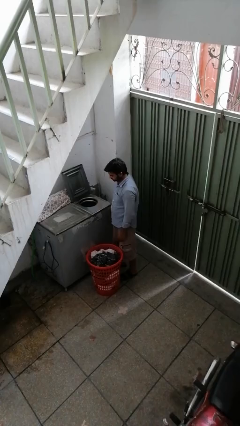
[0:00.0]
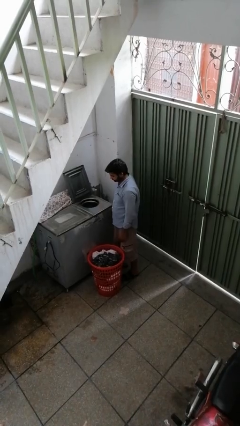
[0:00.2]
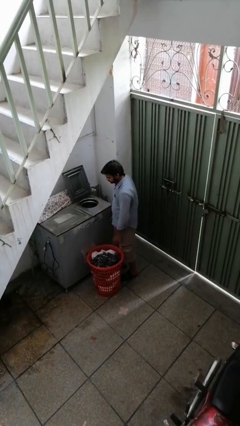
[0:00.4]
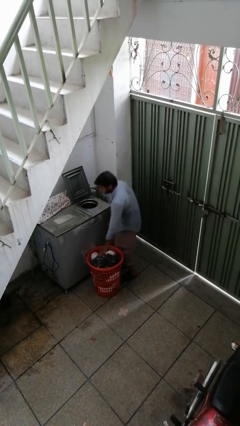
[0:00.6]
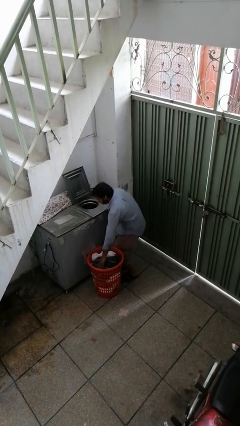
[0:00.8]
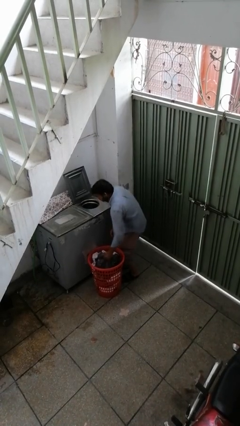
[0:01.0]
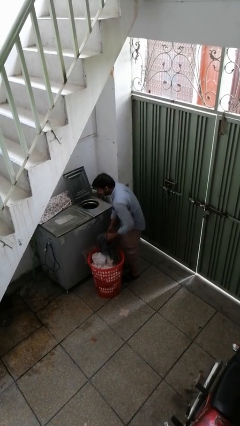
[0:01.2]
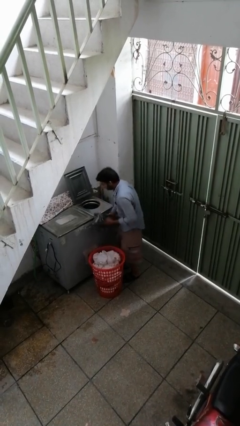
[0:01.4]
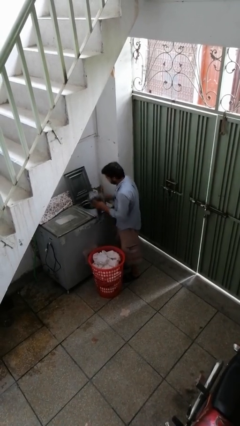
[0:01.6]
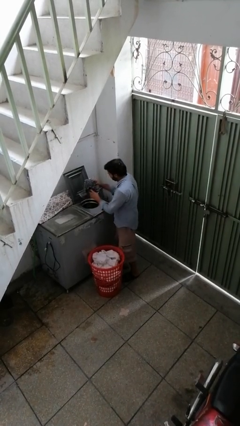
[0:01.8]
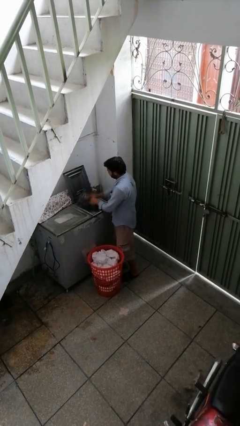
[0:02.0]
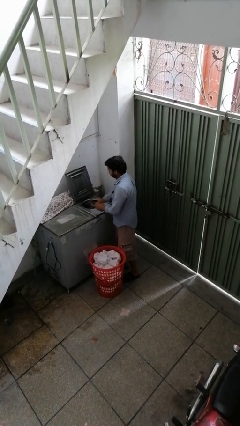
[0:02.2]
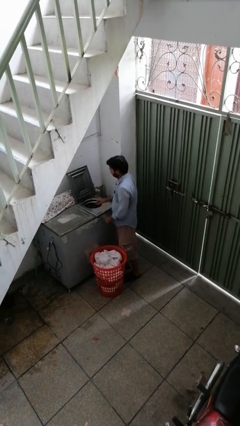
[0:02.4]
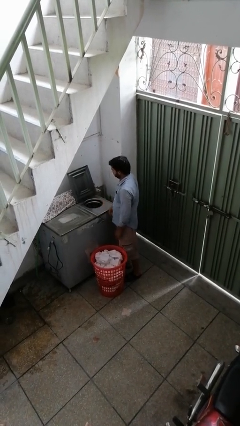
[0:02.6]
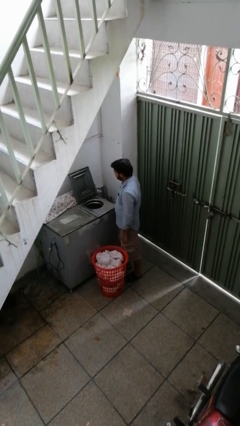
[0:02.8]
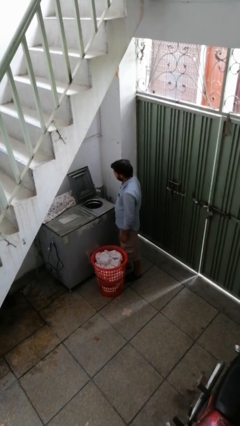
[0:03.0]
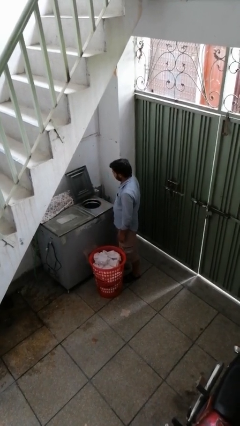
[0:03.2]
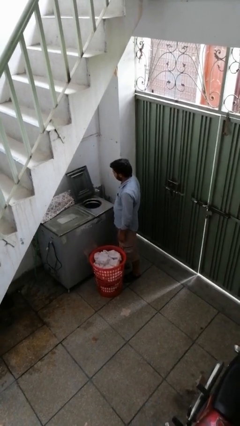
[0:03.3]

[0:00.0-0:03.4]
person loads dryer

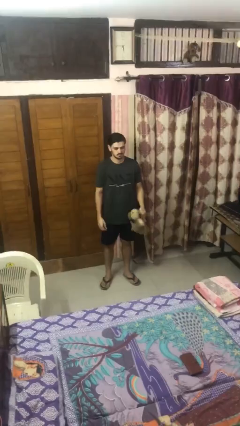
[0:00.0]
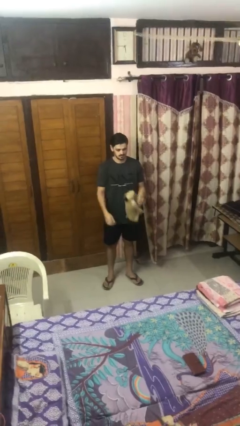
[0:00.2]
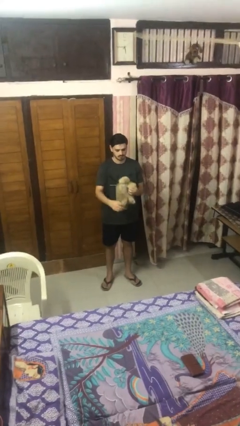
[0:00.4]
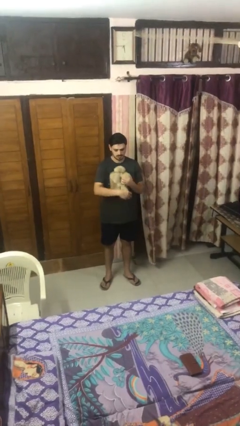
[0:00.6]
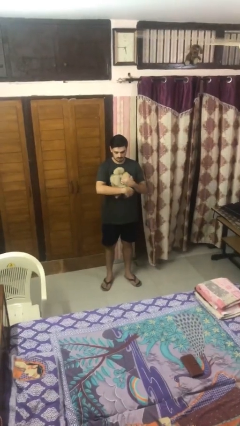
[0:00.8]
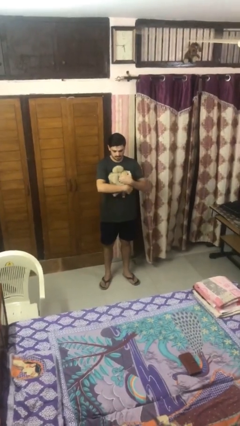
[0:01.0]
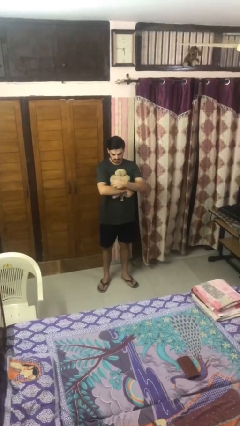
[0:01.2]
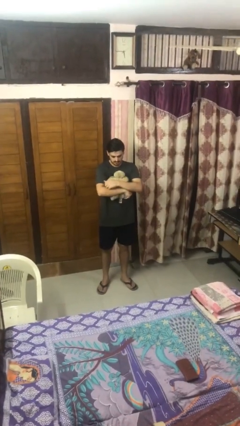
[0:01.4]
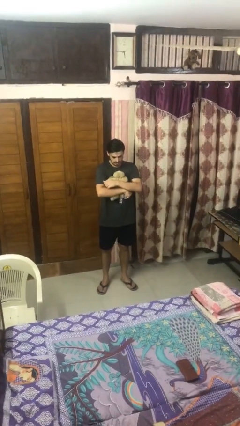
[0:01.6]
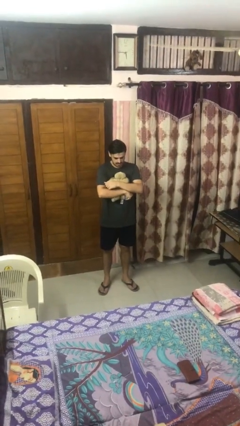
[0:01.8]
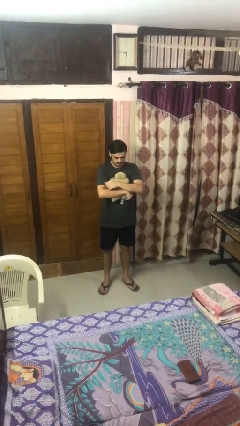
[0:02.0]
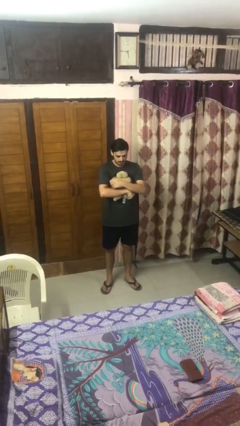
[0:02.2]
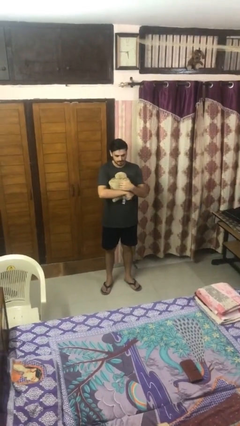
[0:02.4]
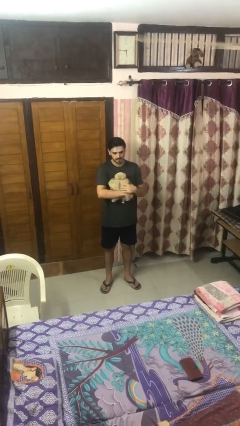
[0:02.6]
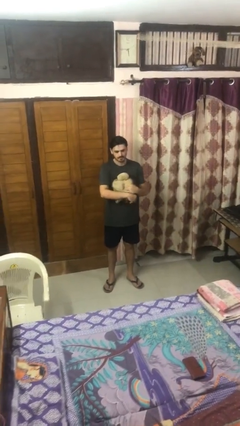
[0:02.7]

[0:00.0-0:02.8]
person hugs stuffed animal

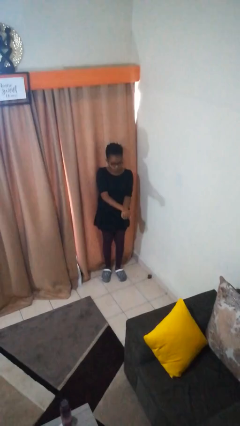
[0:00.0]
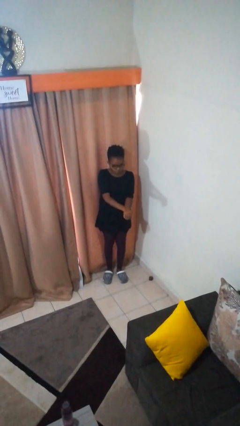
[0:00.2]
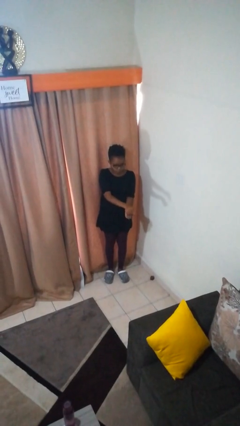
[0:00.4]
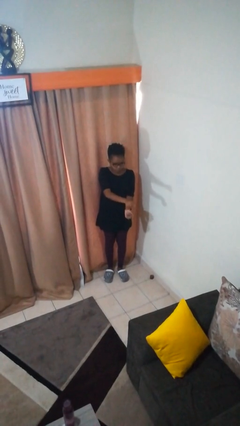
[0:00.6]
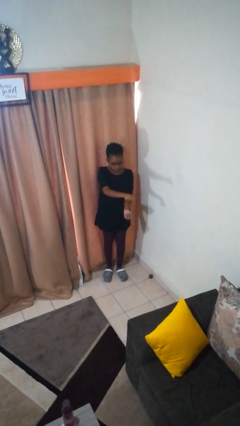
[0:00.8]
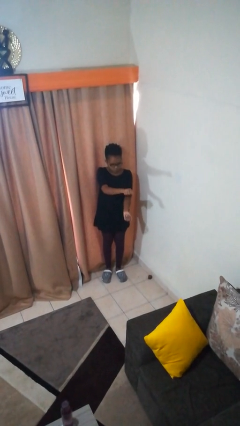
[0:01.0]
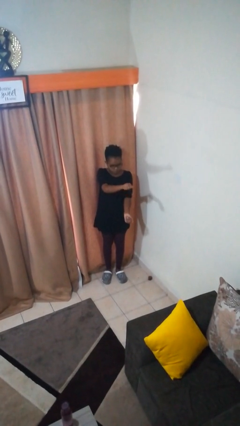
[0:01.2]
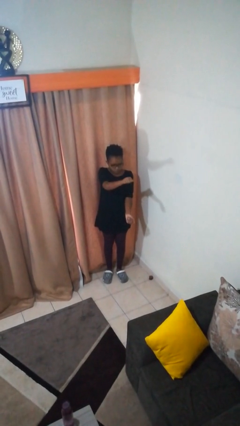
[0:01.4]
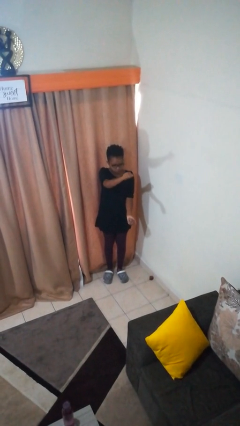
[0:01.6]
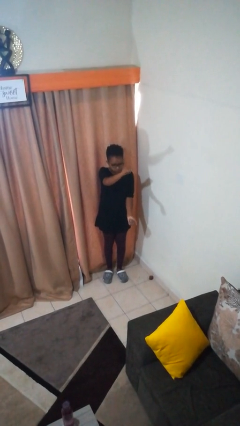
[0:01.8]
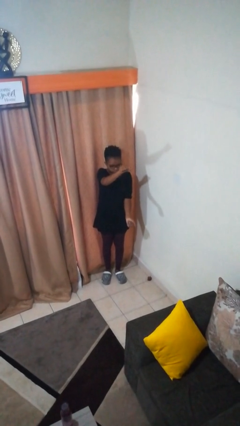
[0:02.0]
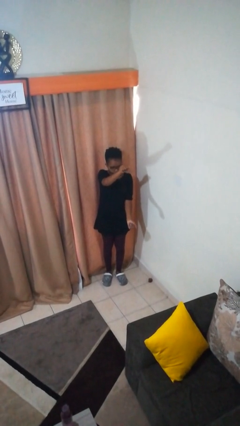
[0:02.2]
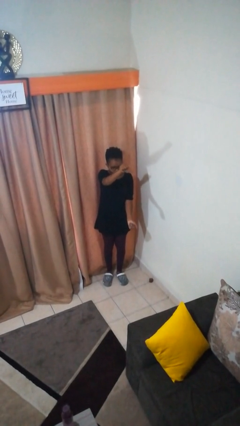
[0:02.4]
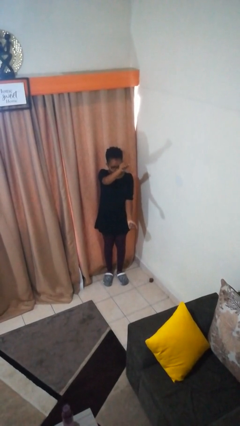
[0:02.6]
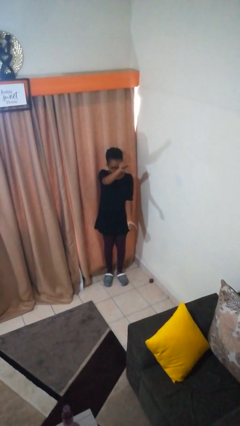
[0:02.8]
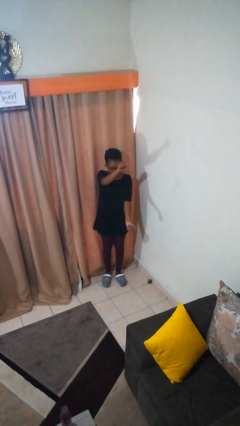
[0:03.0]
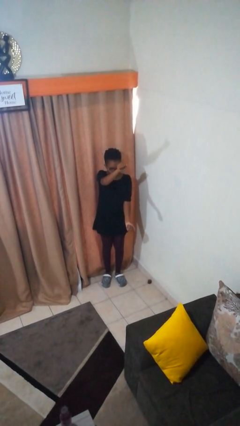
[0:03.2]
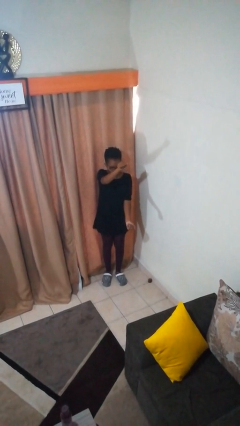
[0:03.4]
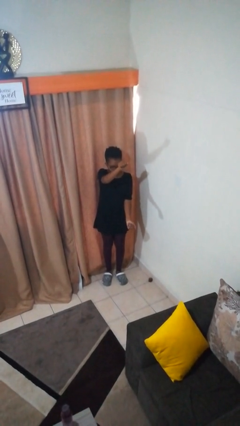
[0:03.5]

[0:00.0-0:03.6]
person gestures zoom in

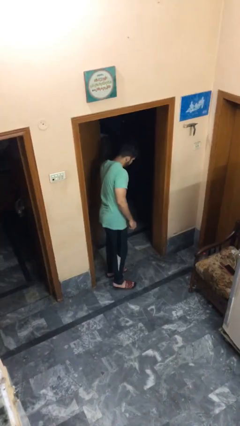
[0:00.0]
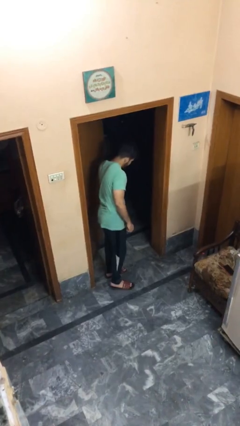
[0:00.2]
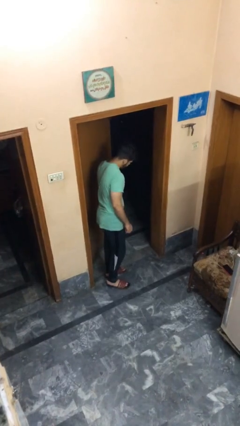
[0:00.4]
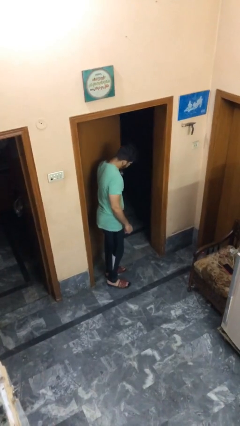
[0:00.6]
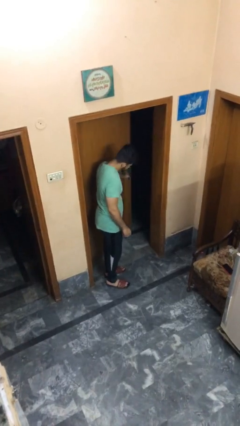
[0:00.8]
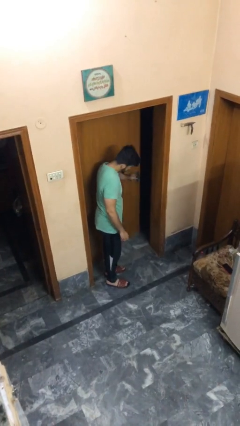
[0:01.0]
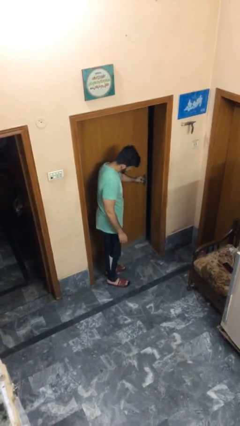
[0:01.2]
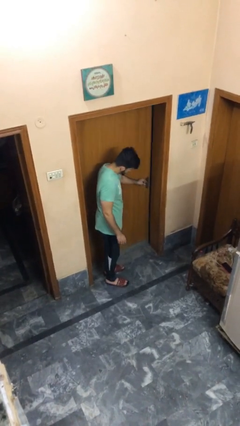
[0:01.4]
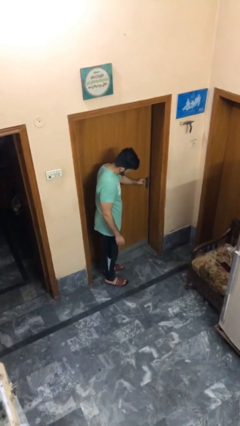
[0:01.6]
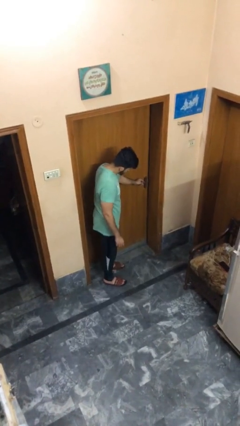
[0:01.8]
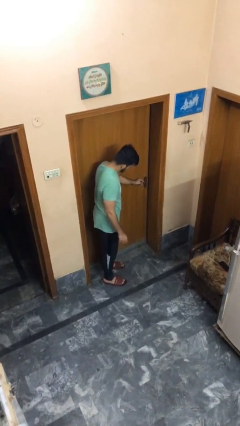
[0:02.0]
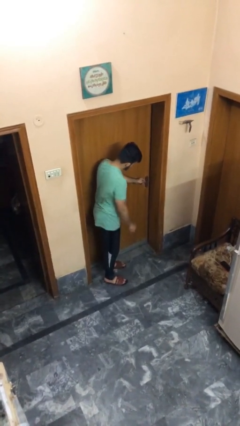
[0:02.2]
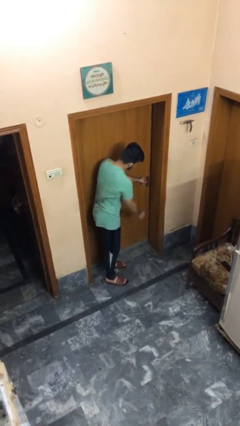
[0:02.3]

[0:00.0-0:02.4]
person closes facility door

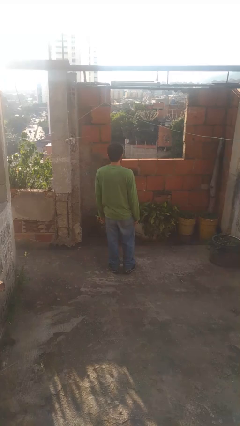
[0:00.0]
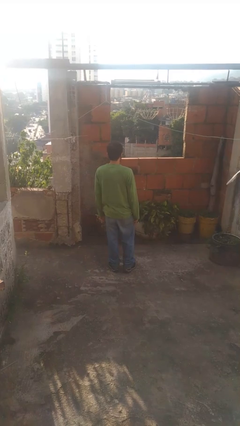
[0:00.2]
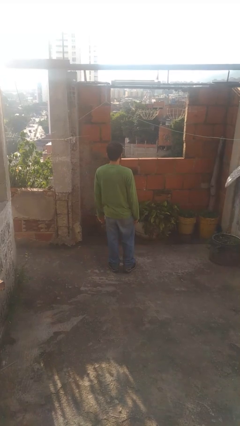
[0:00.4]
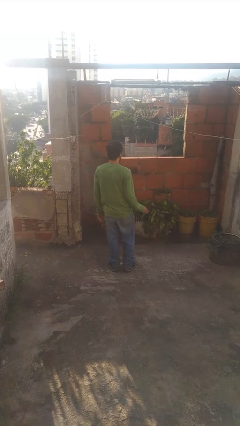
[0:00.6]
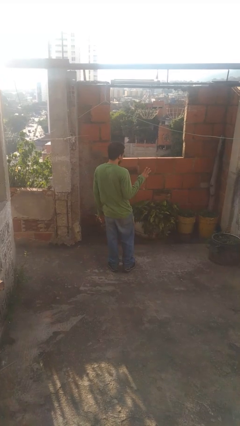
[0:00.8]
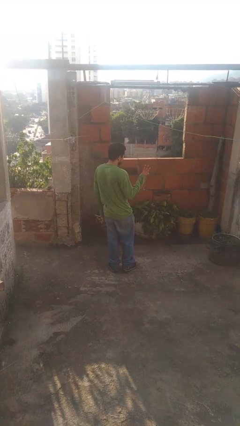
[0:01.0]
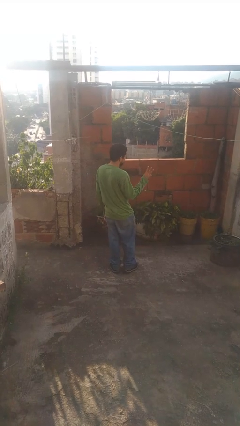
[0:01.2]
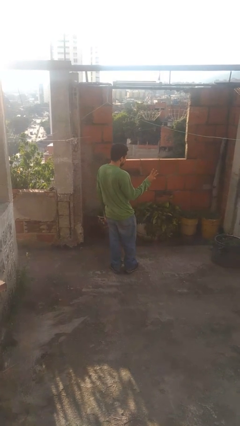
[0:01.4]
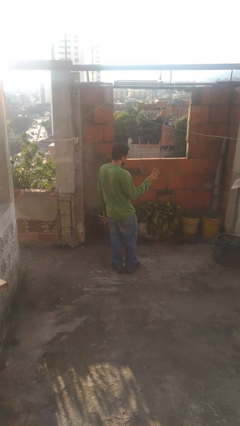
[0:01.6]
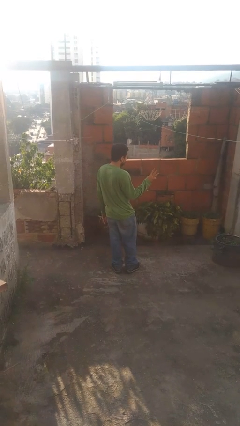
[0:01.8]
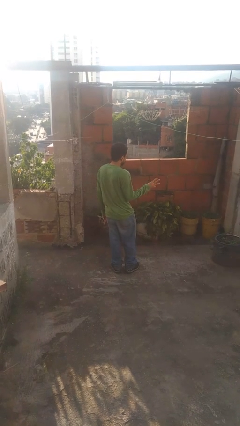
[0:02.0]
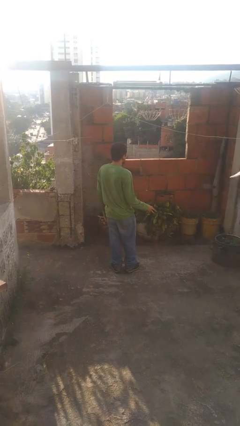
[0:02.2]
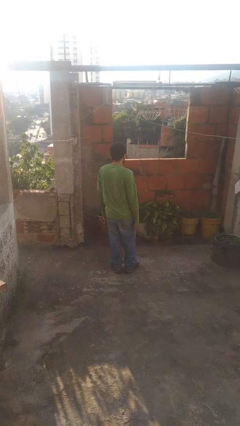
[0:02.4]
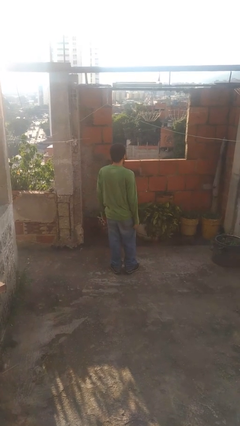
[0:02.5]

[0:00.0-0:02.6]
person gestures number three

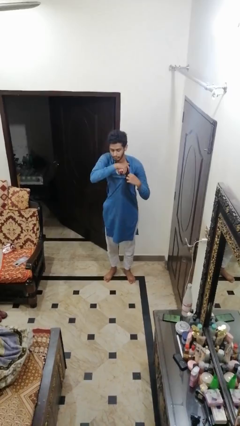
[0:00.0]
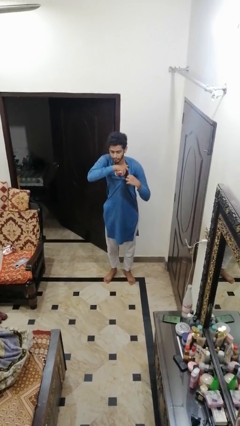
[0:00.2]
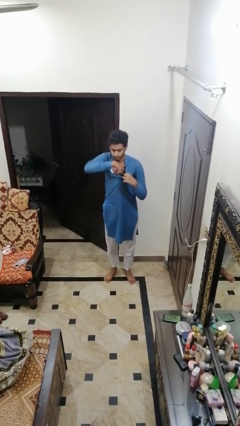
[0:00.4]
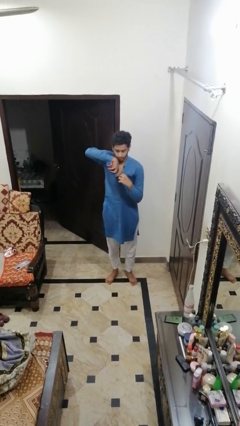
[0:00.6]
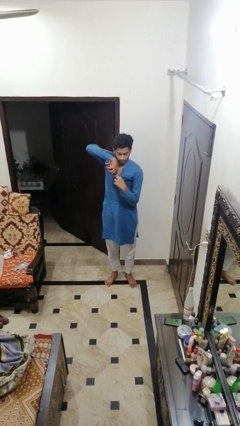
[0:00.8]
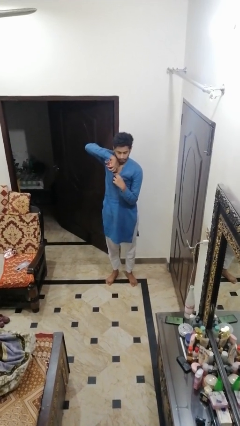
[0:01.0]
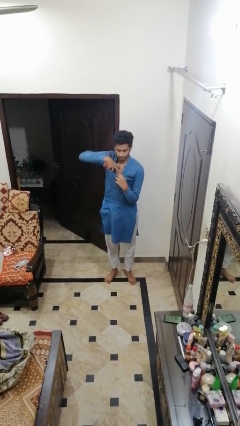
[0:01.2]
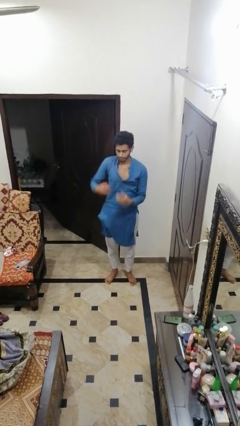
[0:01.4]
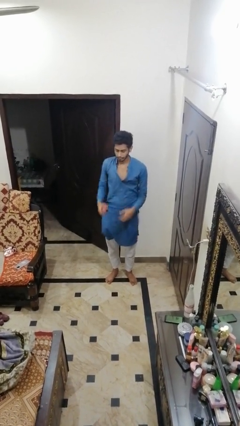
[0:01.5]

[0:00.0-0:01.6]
person applies deodorant

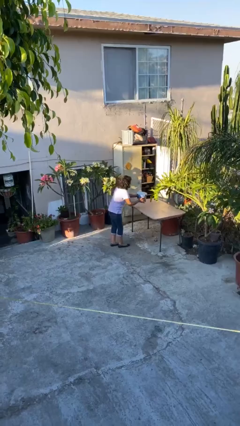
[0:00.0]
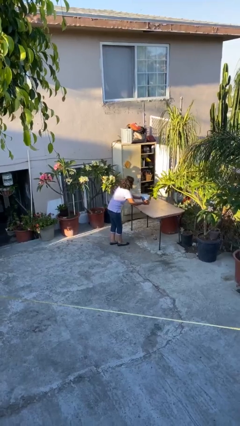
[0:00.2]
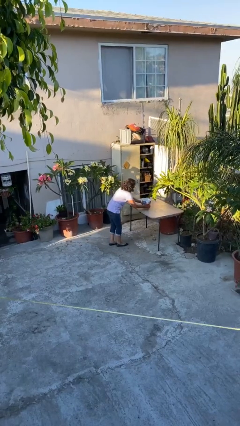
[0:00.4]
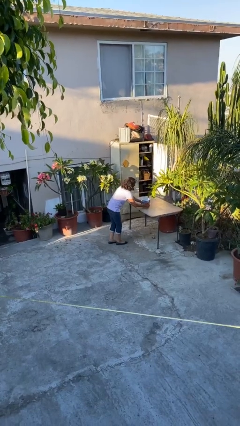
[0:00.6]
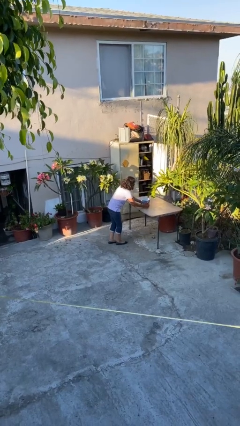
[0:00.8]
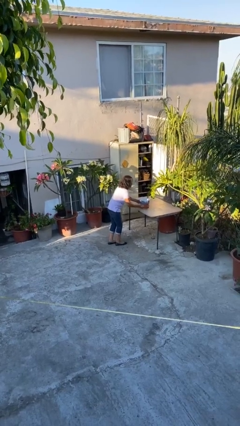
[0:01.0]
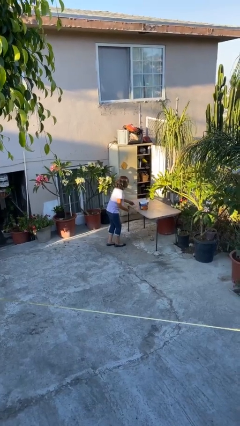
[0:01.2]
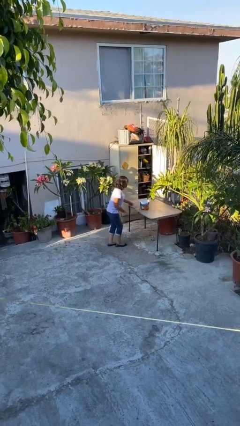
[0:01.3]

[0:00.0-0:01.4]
person puts down object on table
